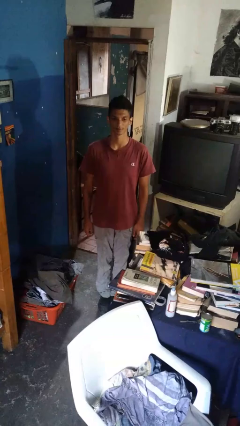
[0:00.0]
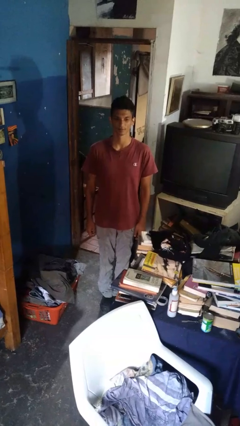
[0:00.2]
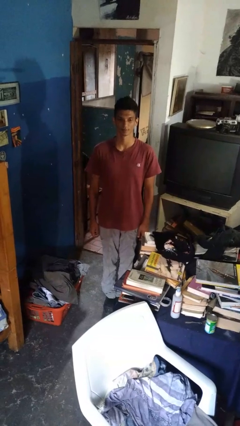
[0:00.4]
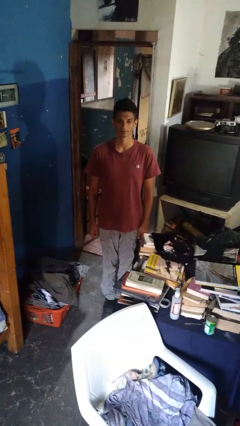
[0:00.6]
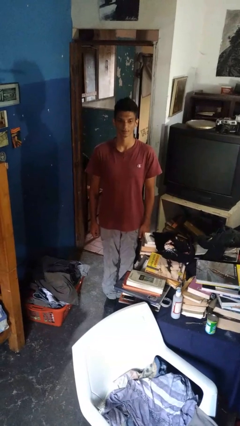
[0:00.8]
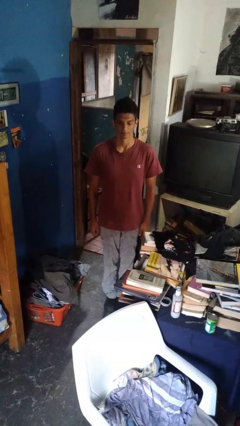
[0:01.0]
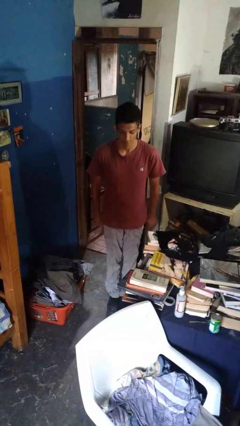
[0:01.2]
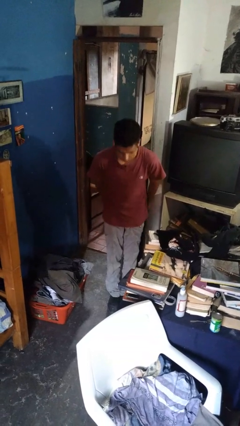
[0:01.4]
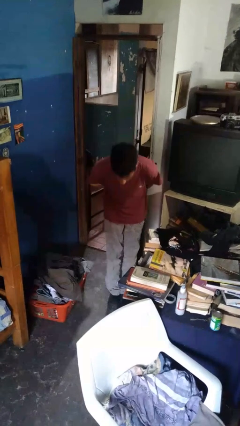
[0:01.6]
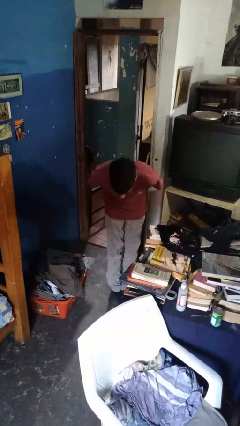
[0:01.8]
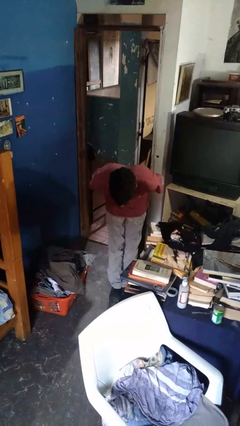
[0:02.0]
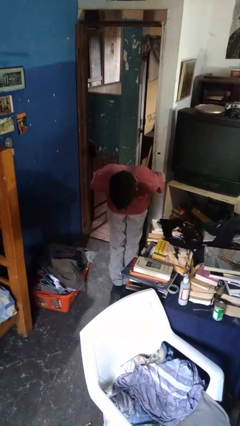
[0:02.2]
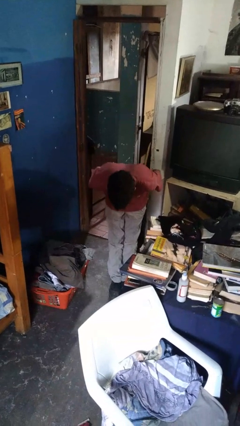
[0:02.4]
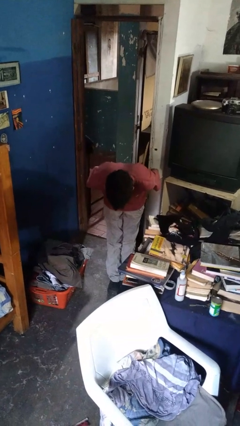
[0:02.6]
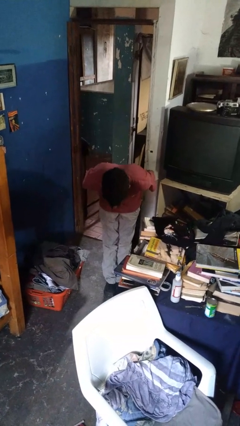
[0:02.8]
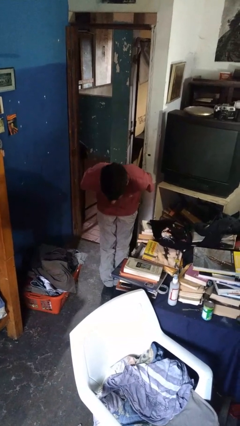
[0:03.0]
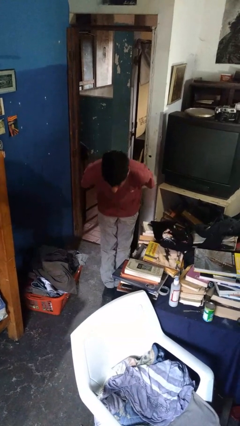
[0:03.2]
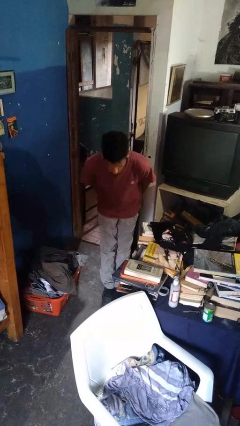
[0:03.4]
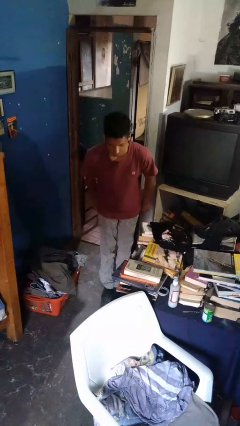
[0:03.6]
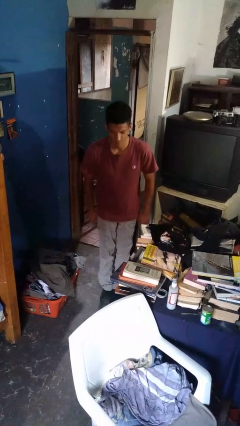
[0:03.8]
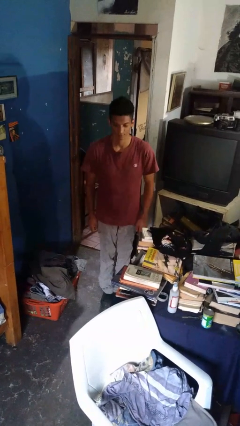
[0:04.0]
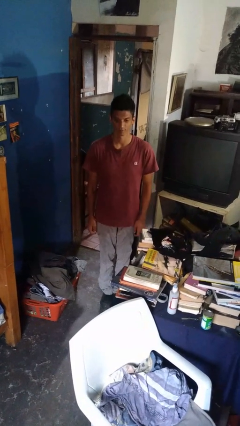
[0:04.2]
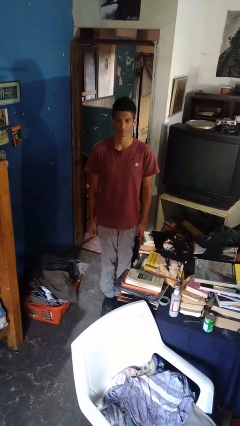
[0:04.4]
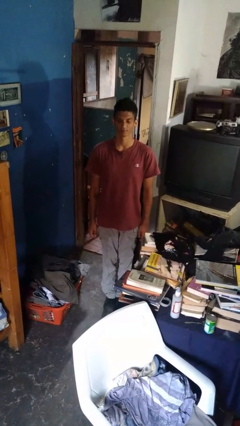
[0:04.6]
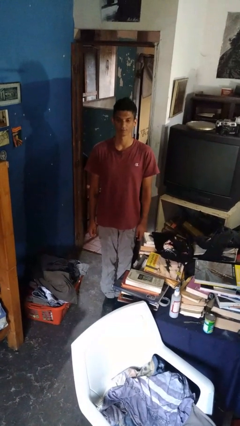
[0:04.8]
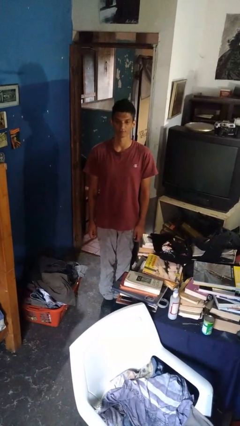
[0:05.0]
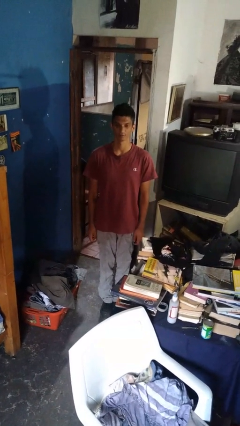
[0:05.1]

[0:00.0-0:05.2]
person bows

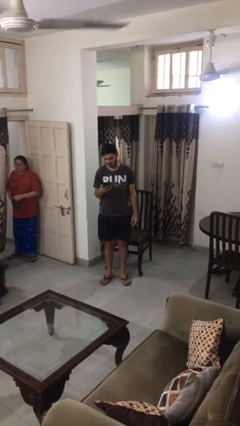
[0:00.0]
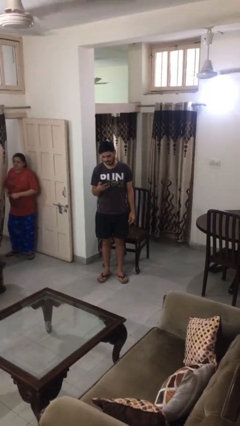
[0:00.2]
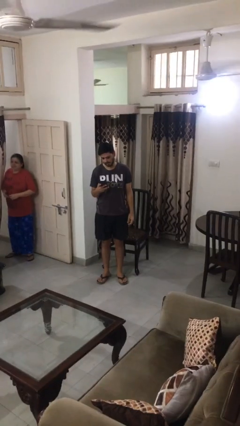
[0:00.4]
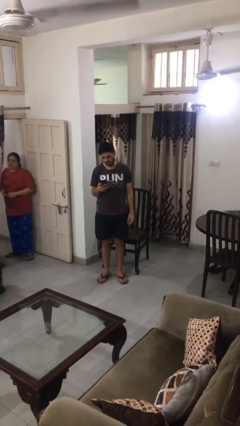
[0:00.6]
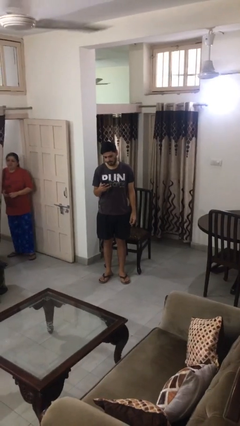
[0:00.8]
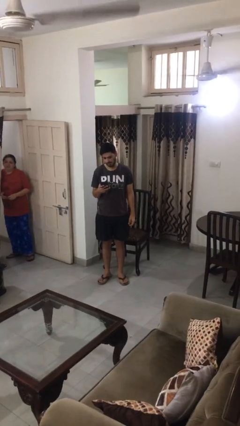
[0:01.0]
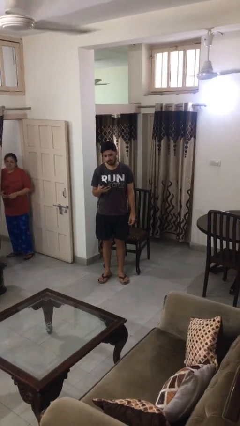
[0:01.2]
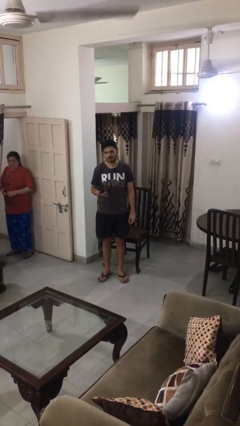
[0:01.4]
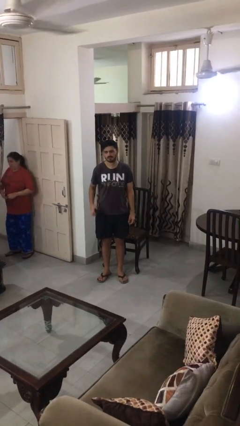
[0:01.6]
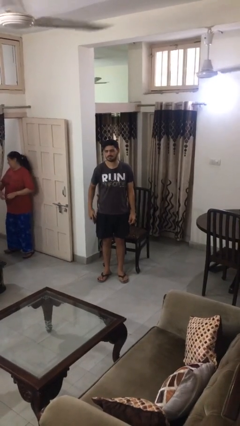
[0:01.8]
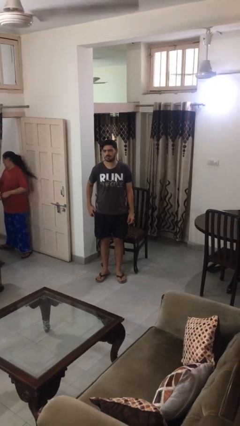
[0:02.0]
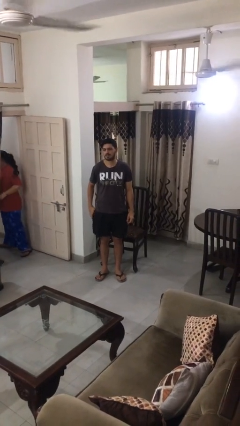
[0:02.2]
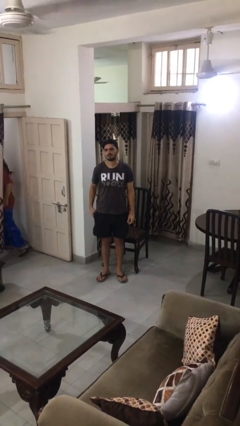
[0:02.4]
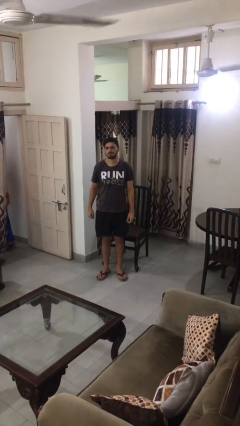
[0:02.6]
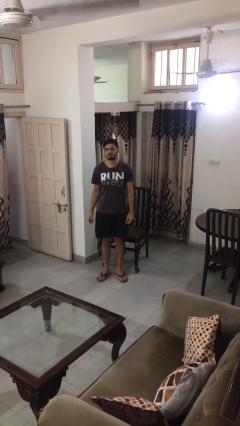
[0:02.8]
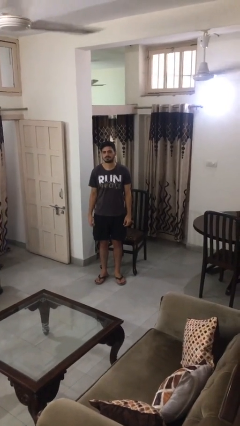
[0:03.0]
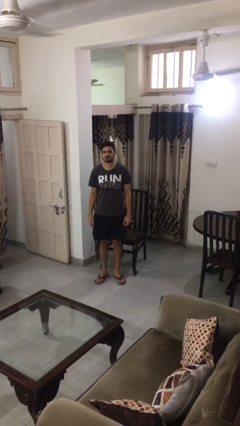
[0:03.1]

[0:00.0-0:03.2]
person puts phone into pocket

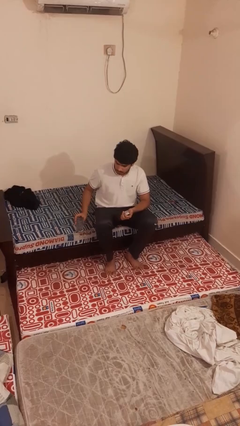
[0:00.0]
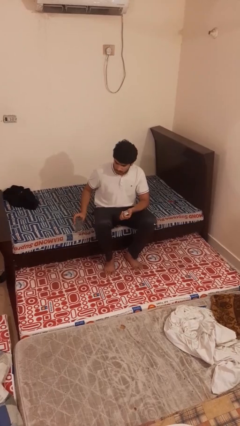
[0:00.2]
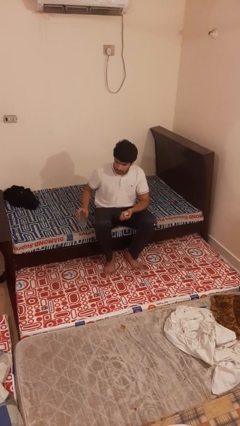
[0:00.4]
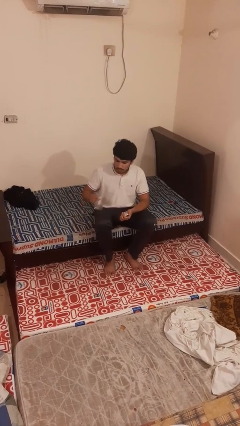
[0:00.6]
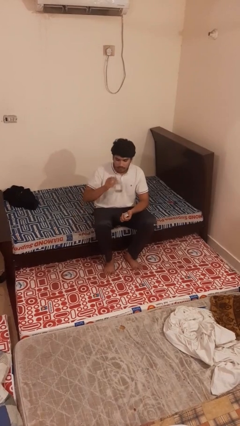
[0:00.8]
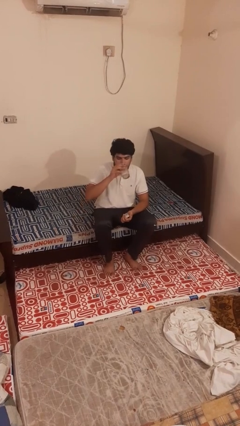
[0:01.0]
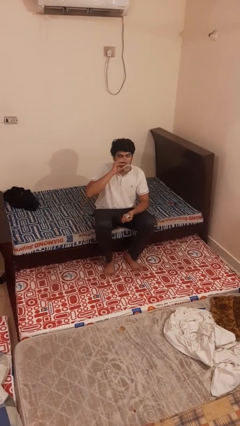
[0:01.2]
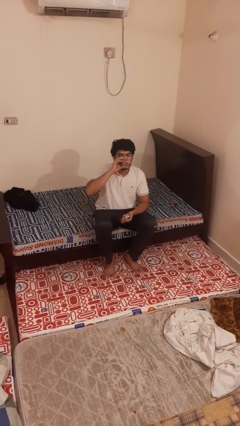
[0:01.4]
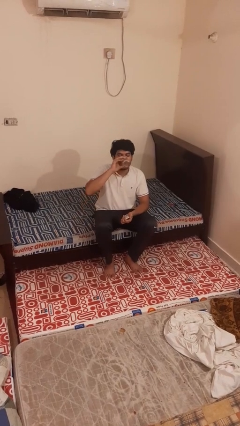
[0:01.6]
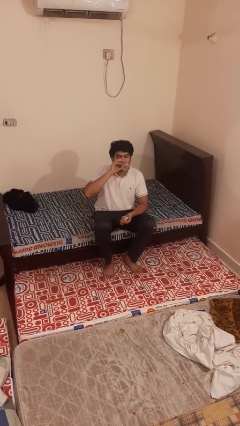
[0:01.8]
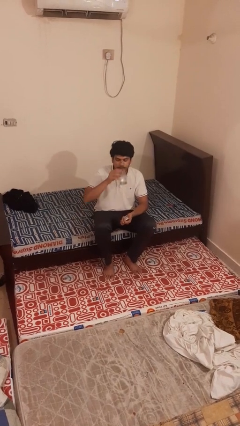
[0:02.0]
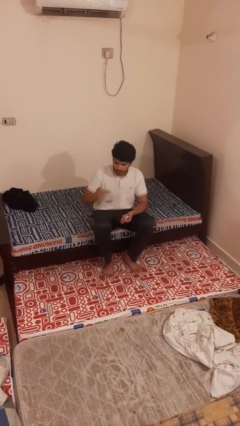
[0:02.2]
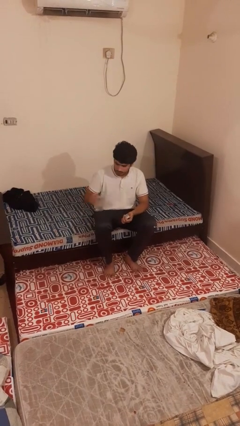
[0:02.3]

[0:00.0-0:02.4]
person drinks from cup

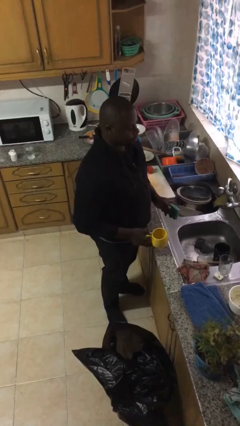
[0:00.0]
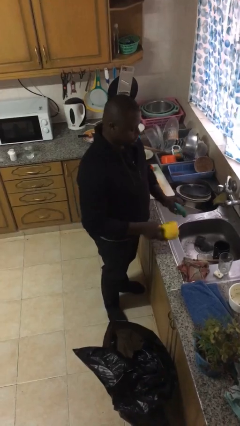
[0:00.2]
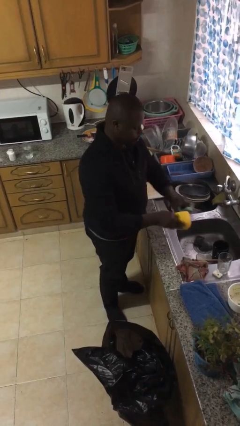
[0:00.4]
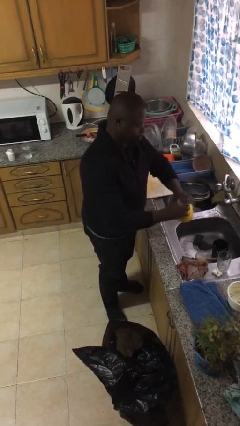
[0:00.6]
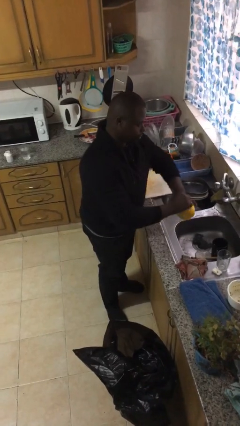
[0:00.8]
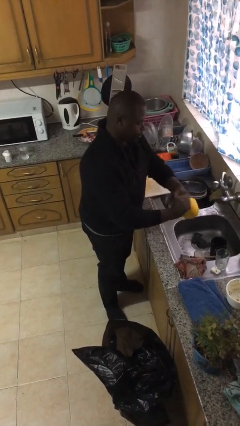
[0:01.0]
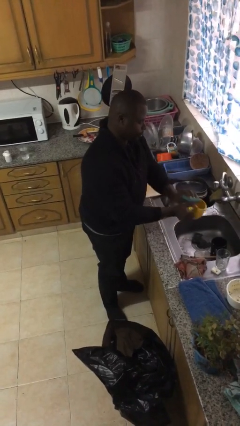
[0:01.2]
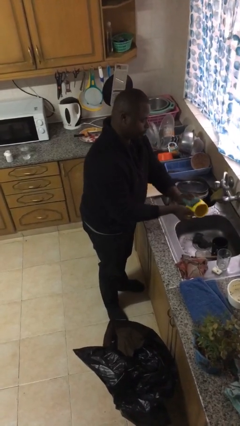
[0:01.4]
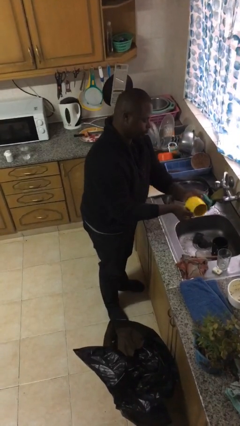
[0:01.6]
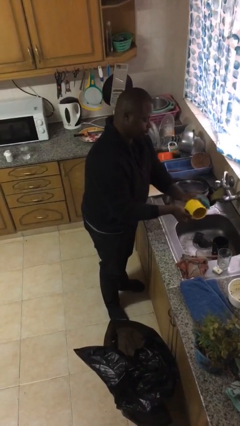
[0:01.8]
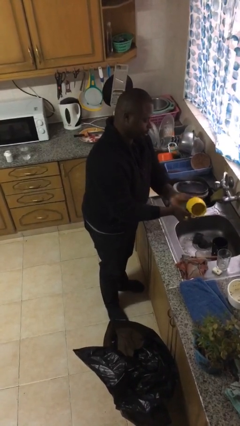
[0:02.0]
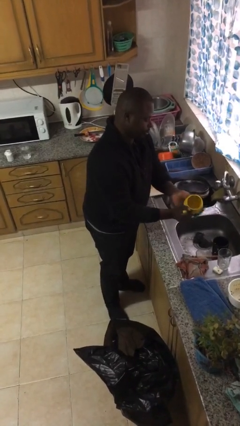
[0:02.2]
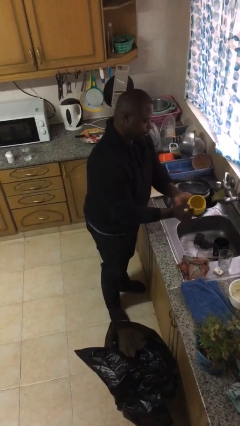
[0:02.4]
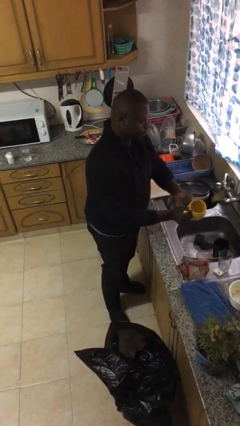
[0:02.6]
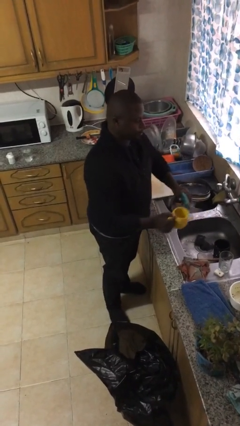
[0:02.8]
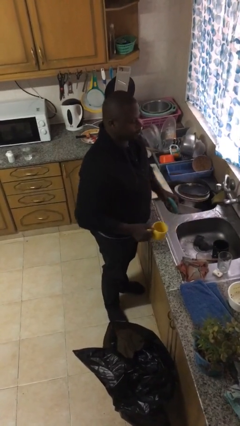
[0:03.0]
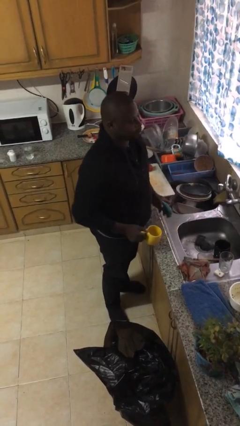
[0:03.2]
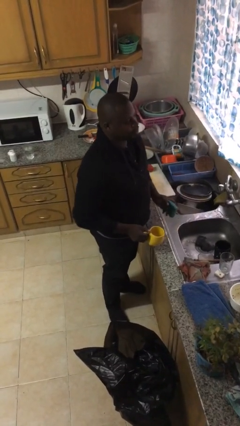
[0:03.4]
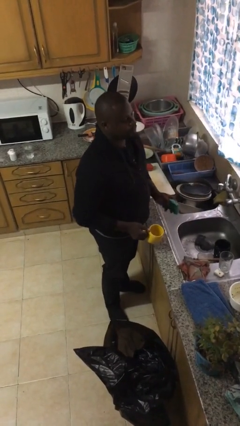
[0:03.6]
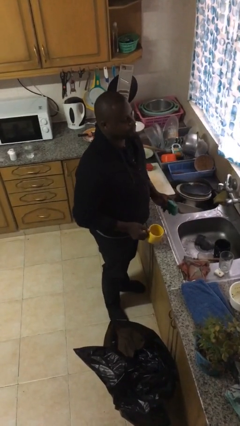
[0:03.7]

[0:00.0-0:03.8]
person washes dish

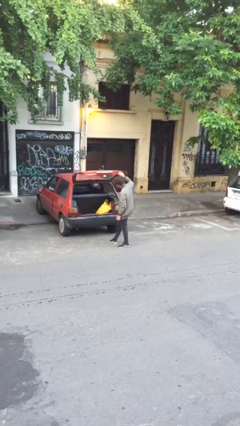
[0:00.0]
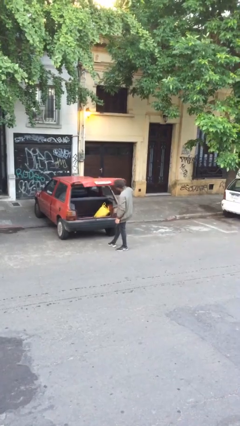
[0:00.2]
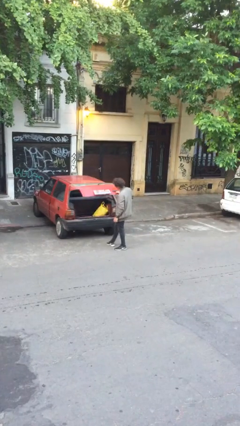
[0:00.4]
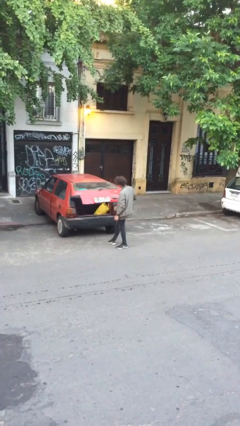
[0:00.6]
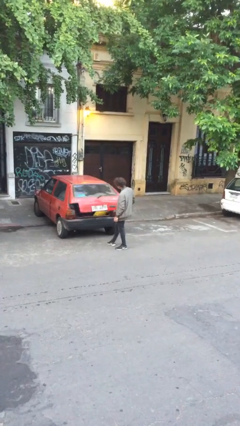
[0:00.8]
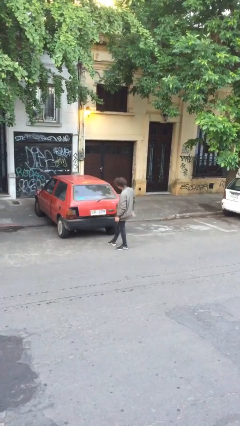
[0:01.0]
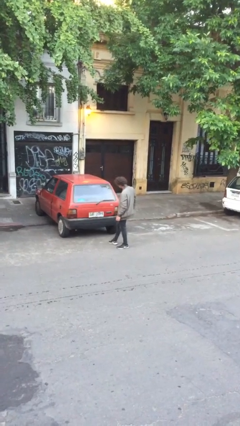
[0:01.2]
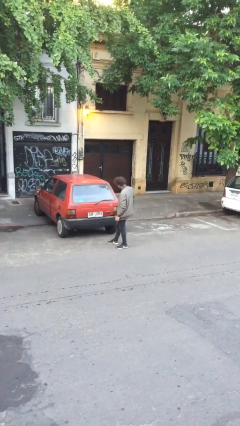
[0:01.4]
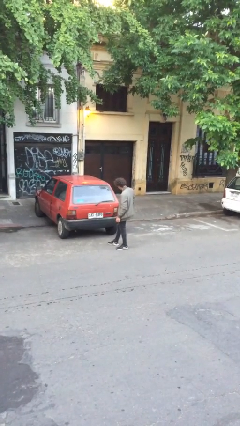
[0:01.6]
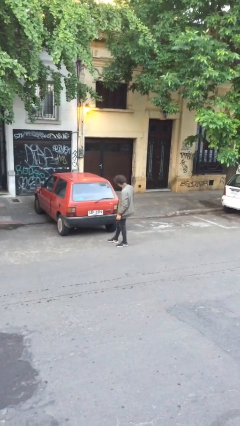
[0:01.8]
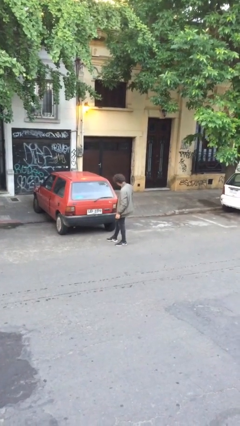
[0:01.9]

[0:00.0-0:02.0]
person closes car trunk

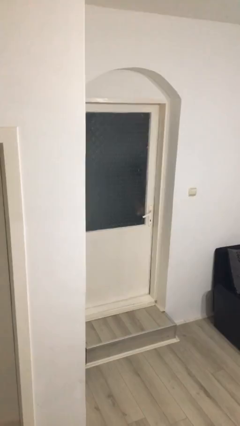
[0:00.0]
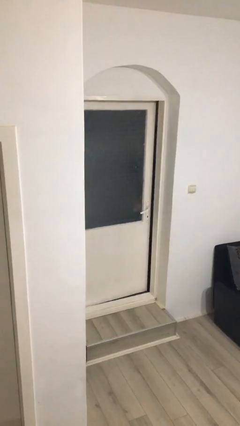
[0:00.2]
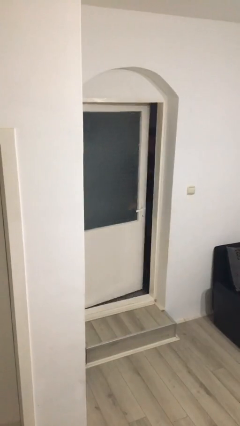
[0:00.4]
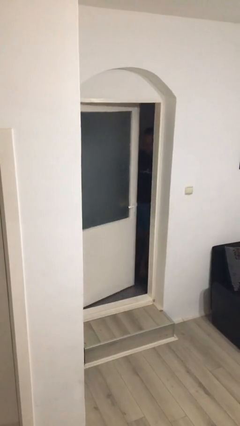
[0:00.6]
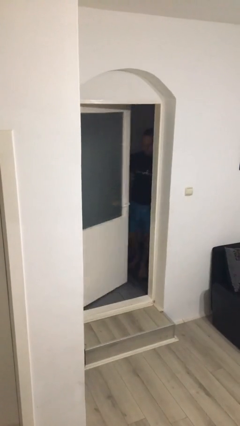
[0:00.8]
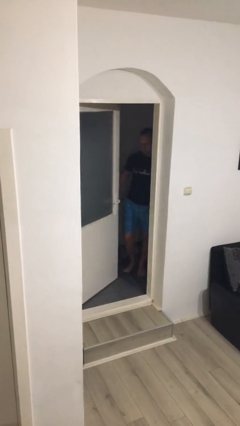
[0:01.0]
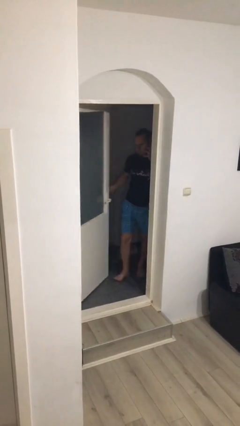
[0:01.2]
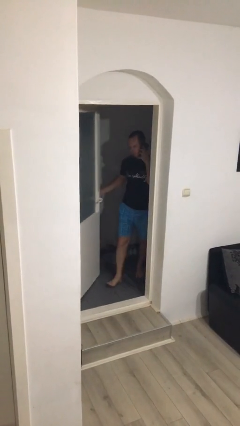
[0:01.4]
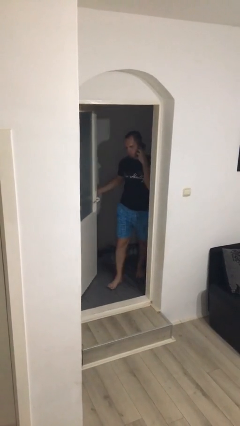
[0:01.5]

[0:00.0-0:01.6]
person opens facility door
